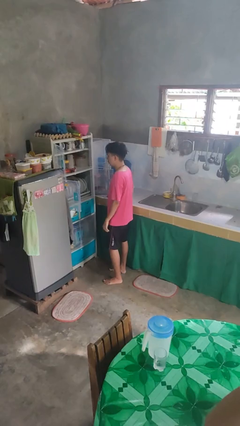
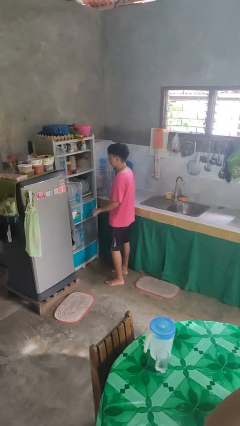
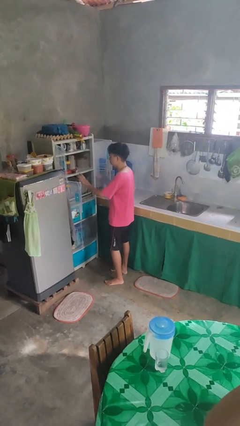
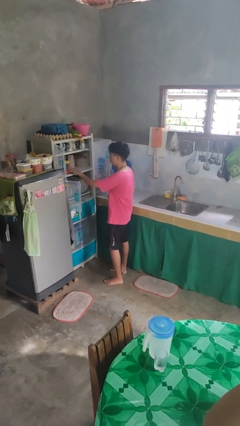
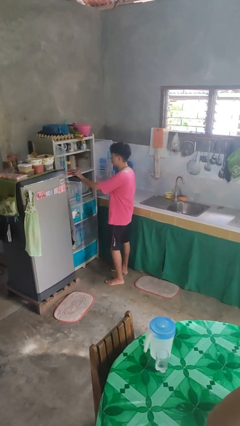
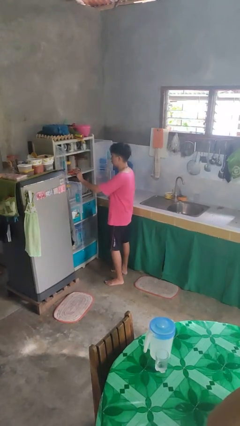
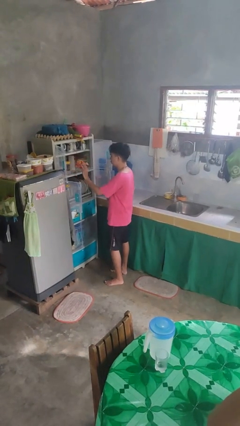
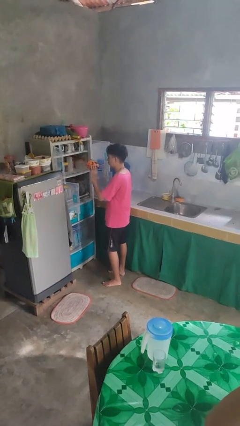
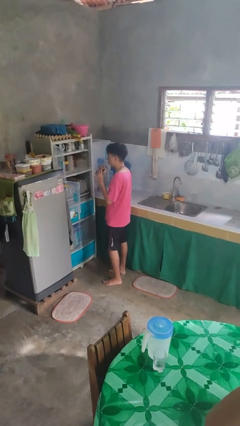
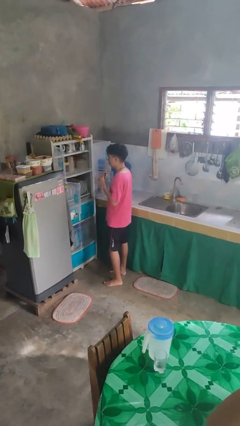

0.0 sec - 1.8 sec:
person takes object from cabinet

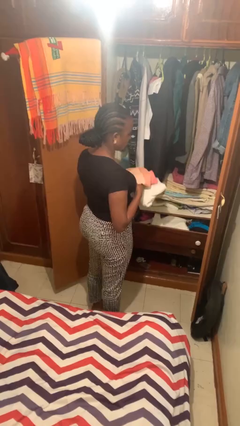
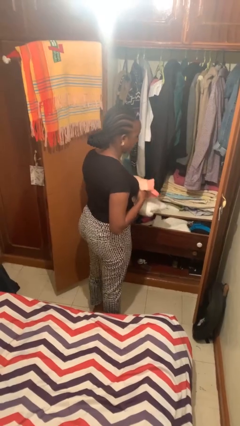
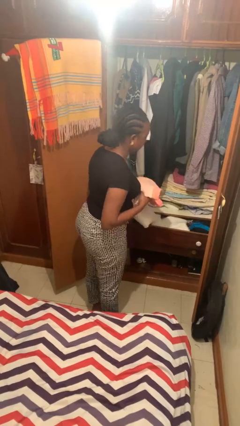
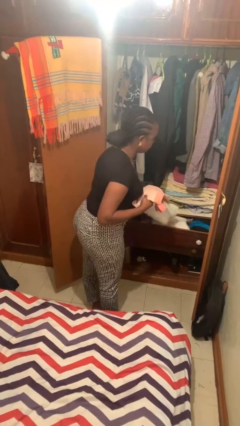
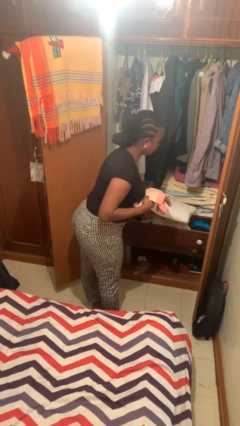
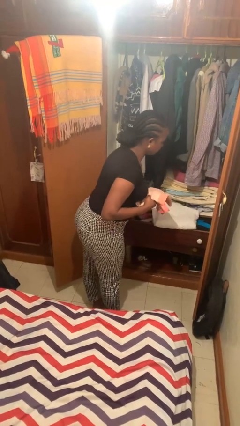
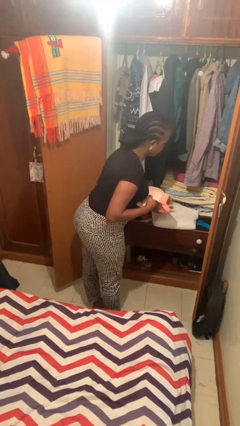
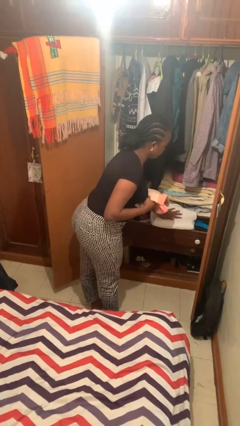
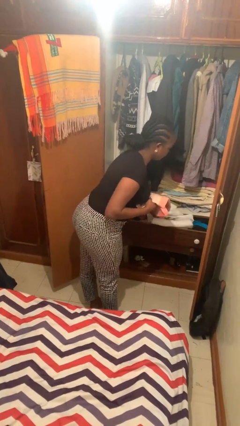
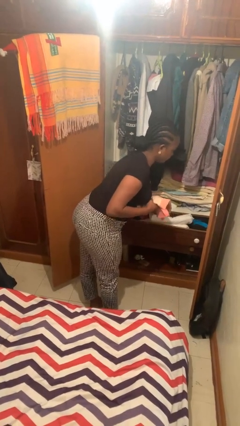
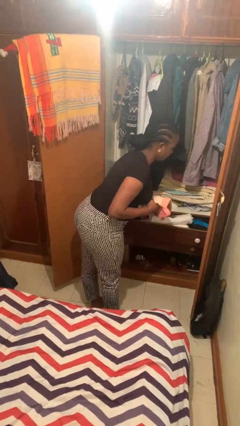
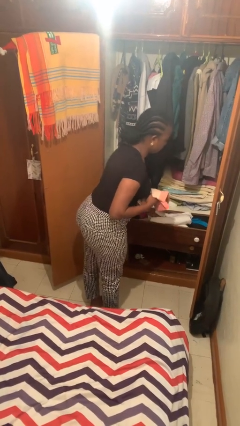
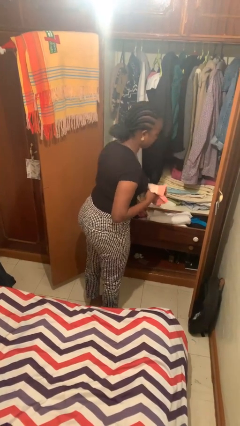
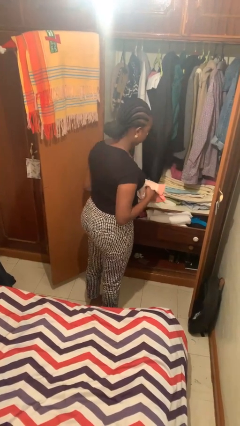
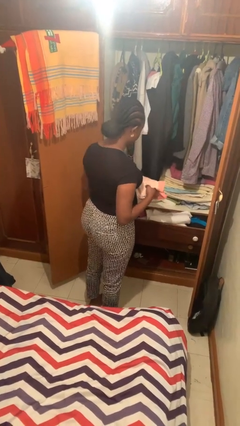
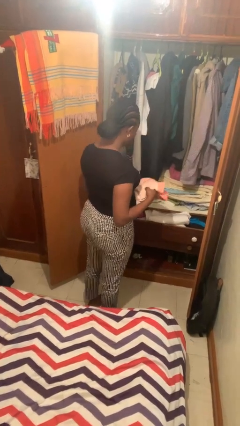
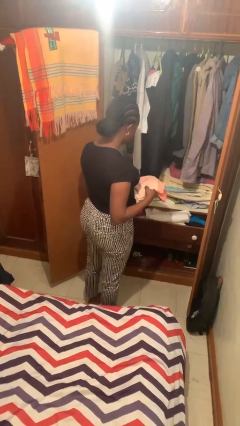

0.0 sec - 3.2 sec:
person puts clothes into dresser

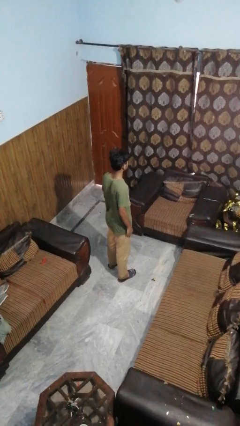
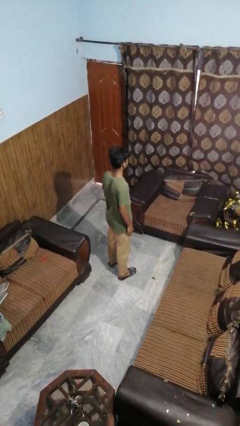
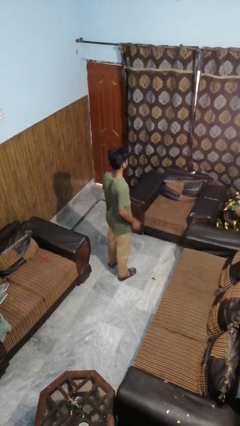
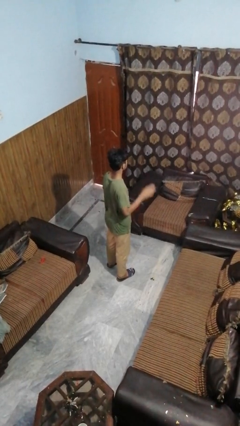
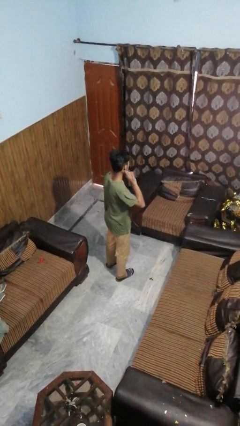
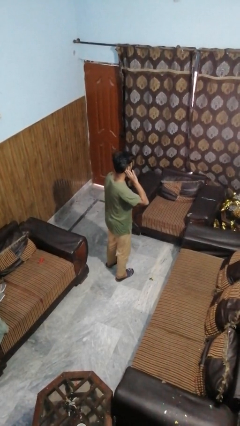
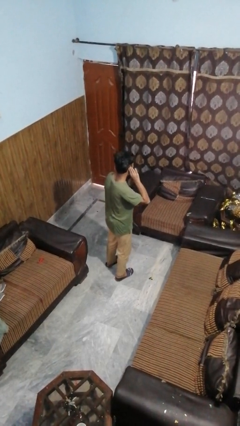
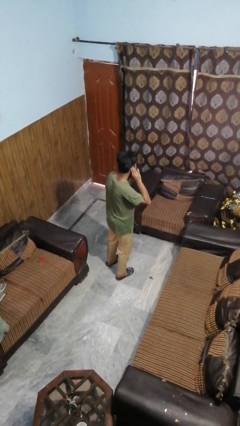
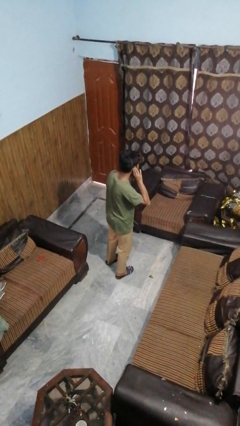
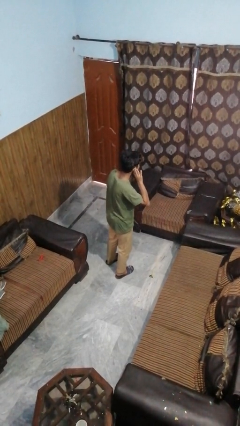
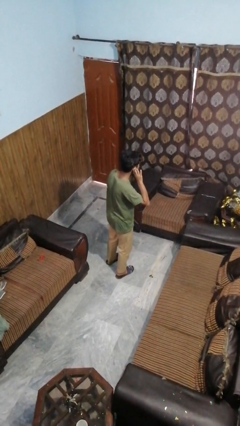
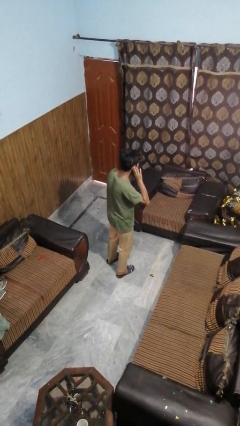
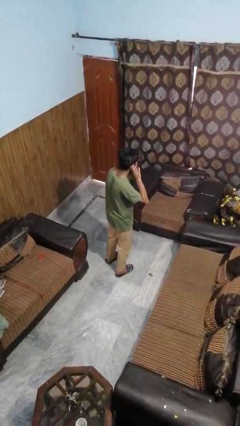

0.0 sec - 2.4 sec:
person gestures listen closely

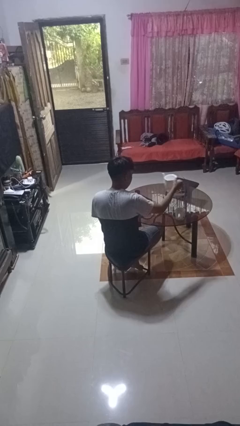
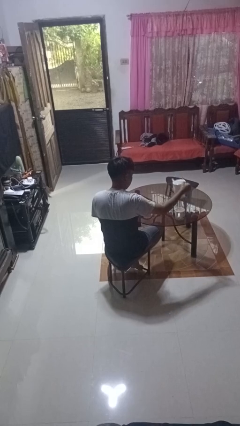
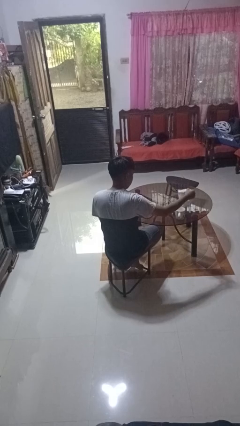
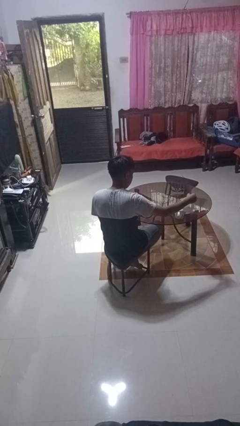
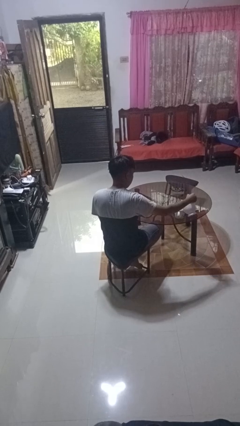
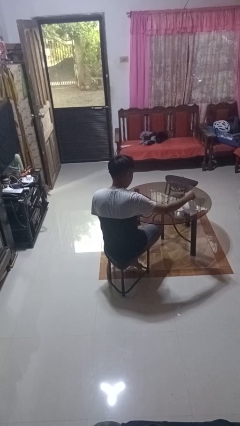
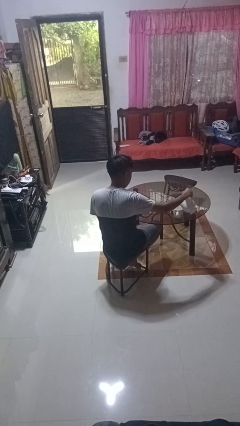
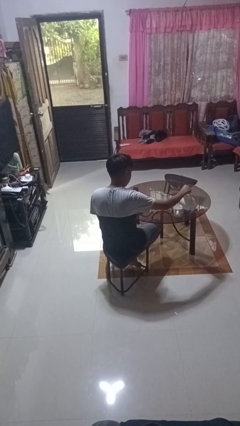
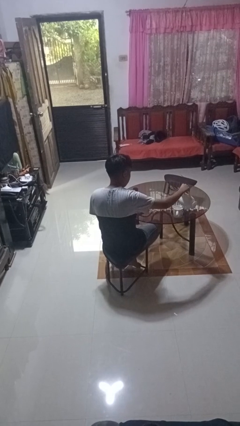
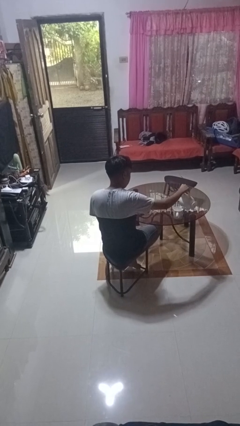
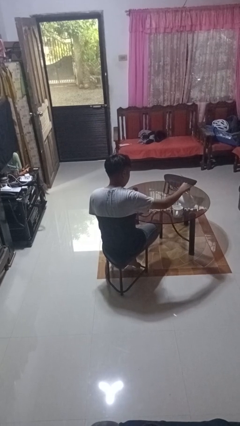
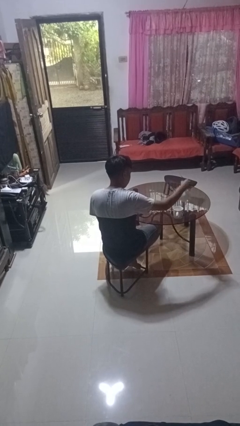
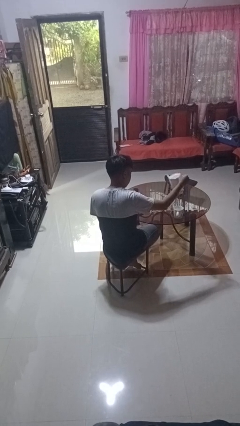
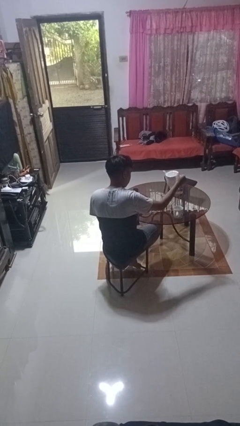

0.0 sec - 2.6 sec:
person pours coffee into mug

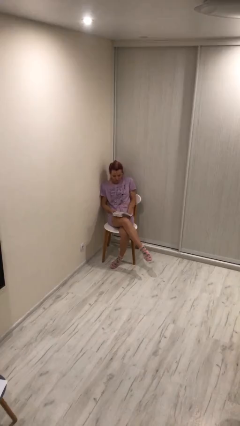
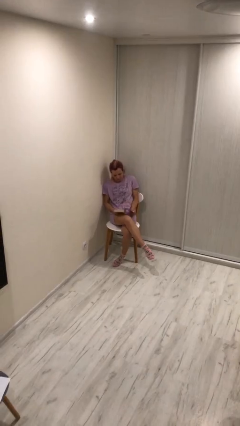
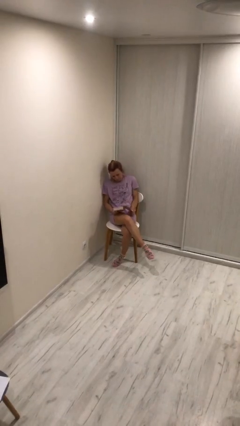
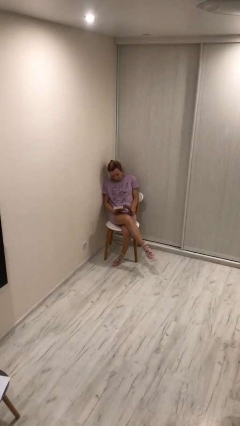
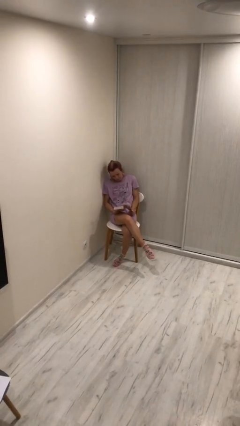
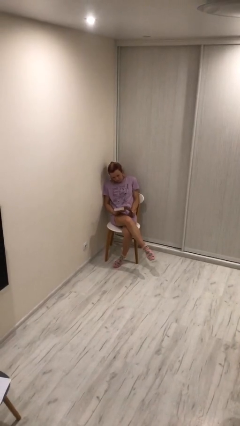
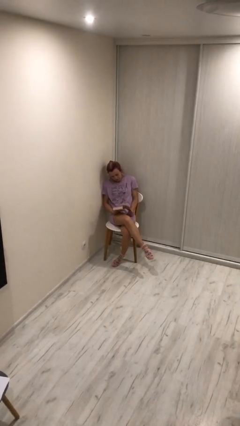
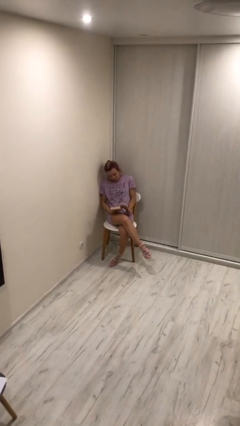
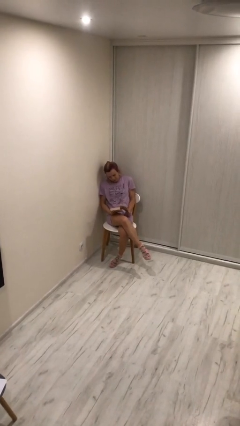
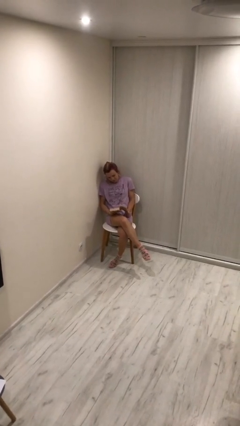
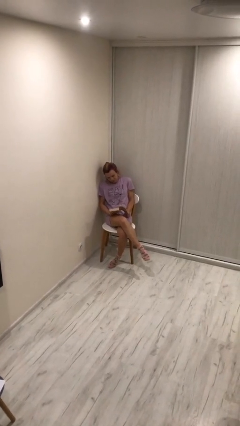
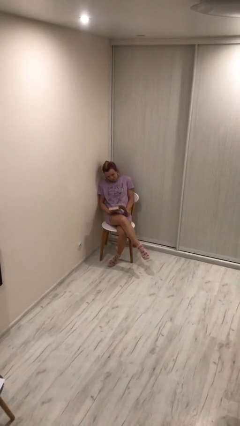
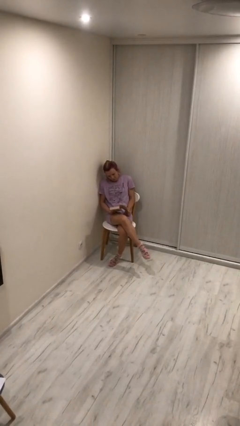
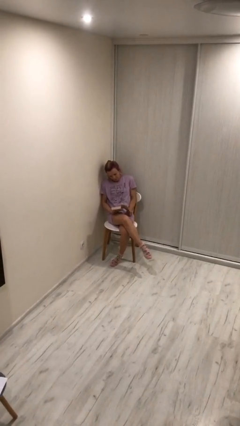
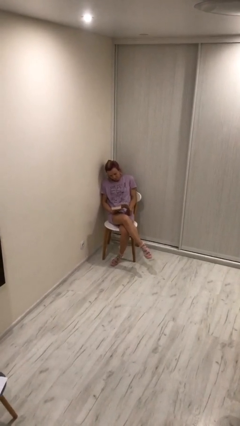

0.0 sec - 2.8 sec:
person reads book

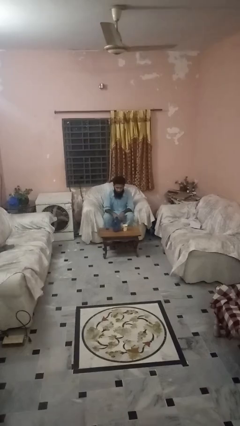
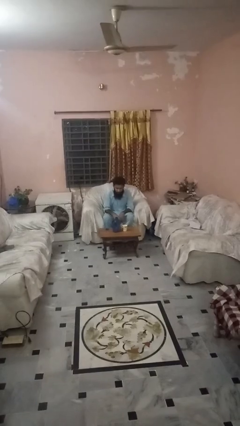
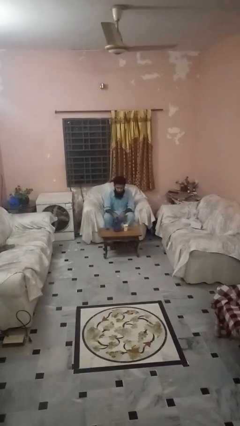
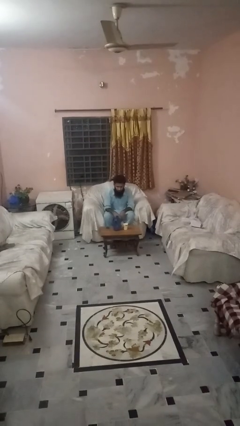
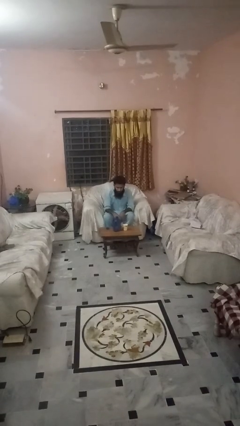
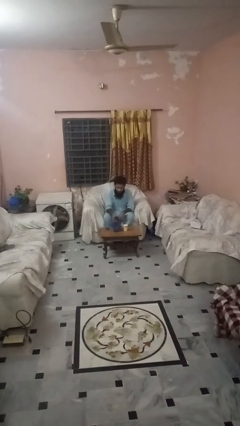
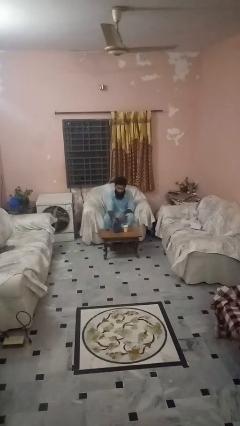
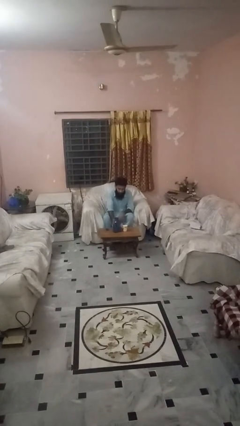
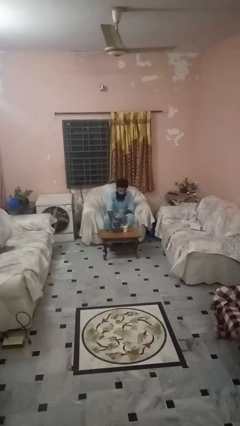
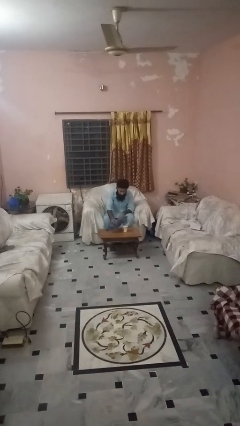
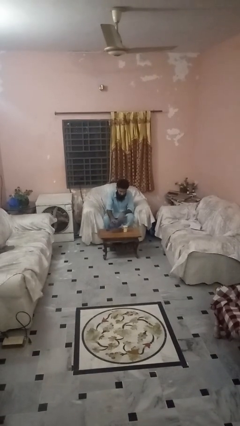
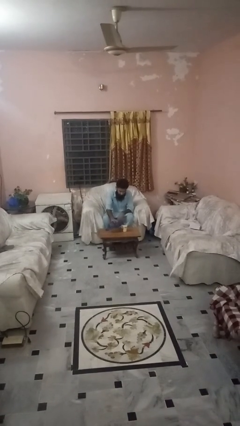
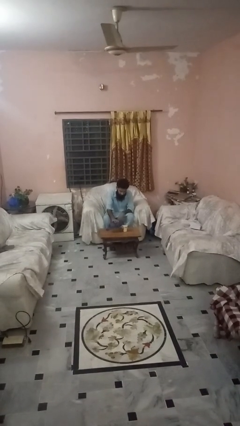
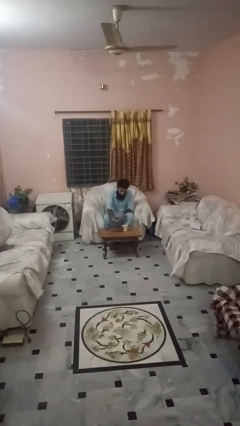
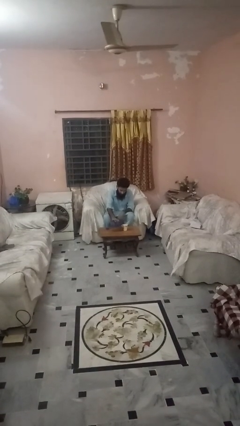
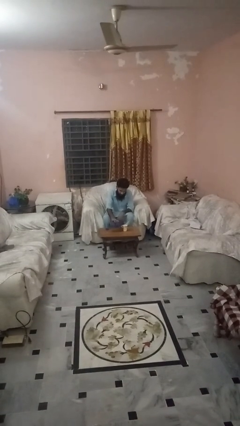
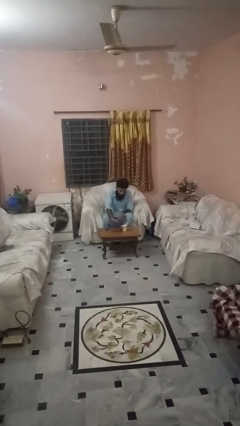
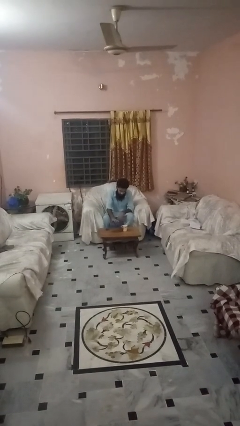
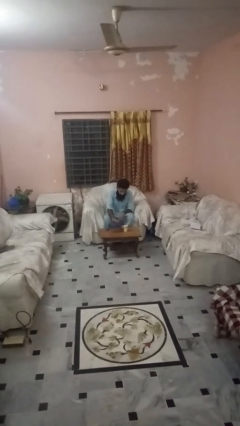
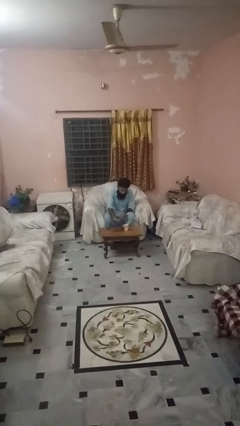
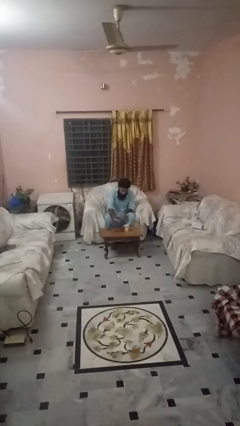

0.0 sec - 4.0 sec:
person pours liquid into cup
